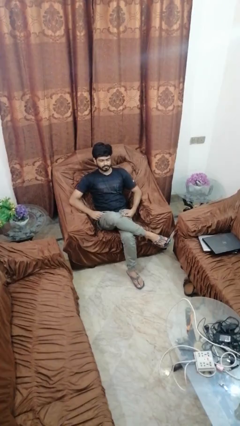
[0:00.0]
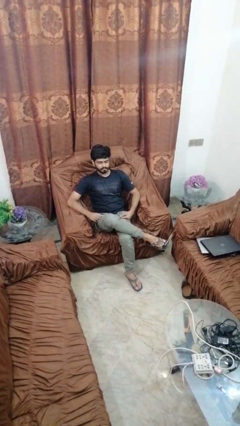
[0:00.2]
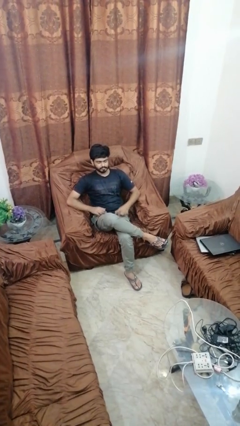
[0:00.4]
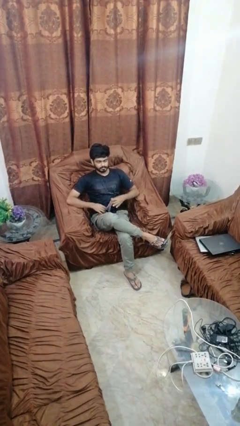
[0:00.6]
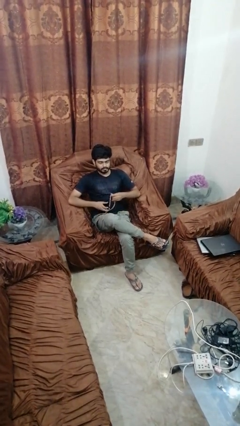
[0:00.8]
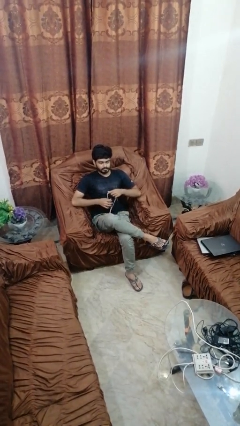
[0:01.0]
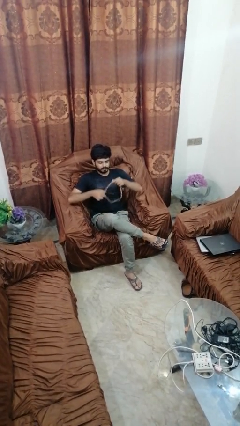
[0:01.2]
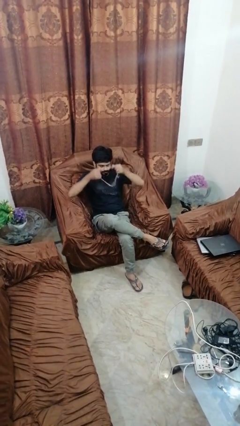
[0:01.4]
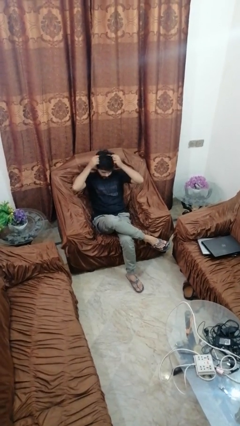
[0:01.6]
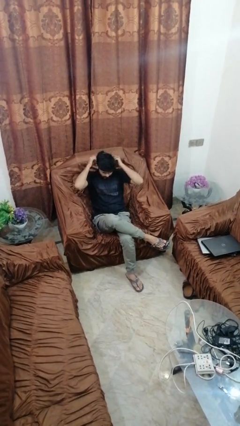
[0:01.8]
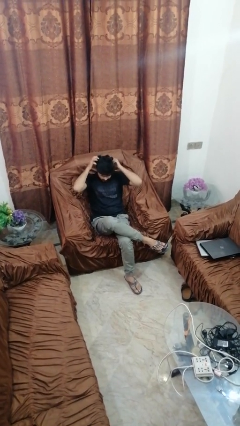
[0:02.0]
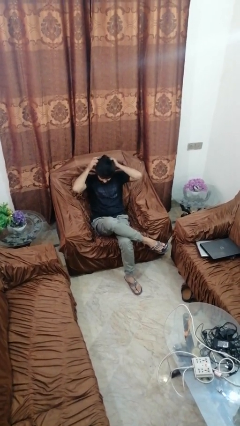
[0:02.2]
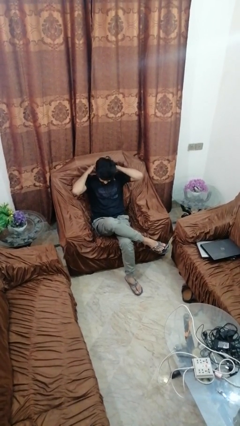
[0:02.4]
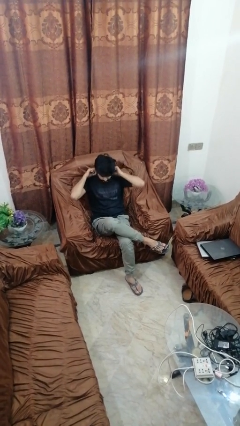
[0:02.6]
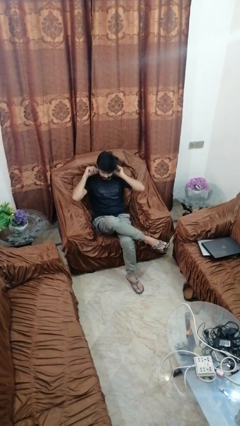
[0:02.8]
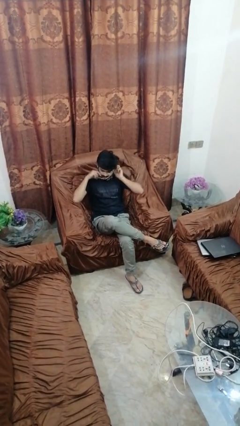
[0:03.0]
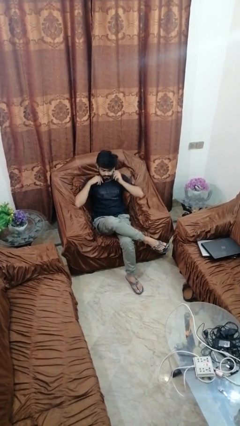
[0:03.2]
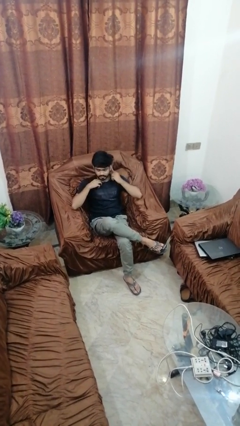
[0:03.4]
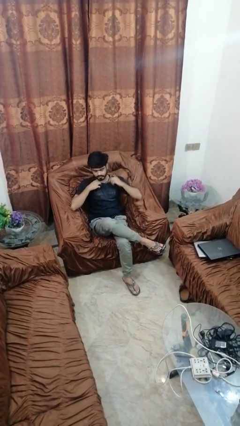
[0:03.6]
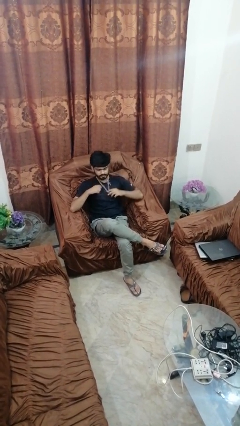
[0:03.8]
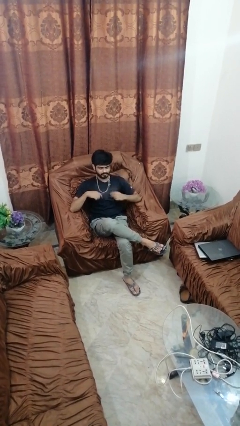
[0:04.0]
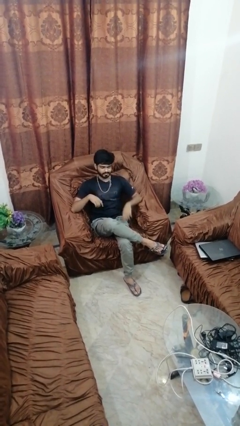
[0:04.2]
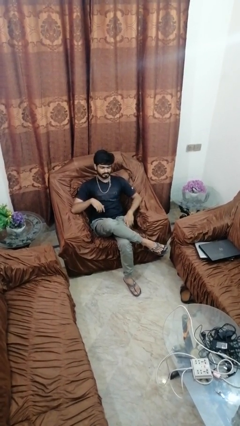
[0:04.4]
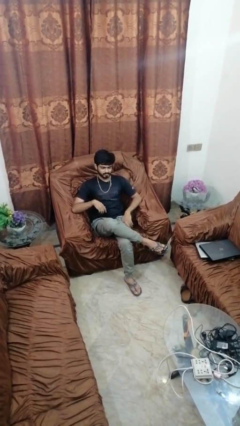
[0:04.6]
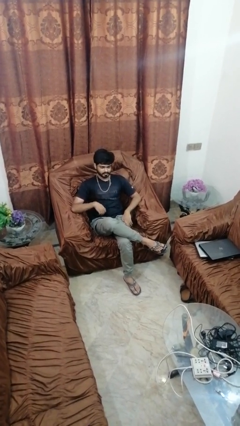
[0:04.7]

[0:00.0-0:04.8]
person puts on necklace

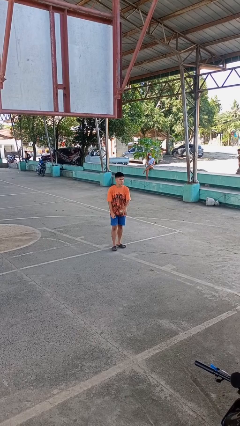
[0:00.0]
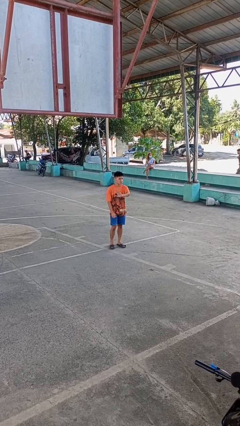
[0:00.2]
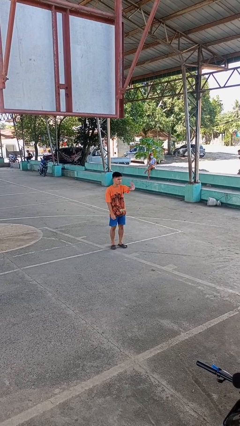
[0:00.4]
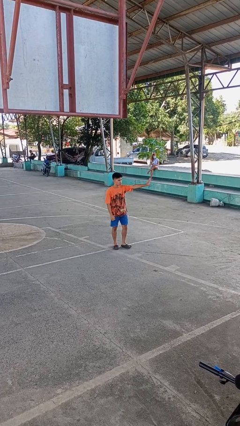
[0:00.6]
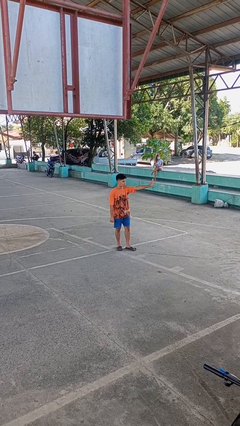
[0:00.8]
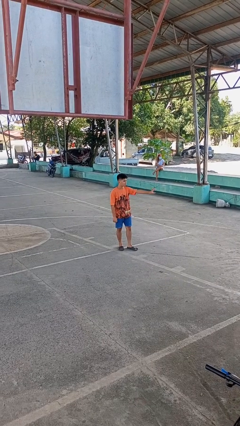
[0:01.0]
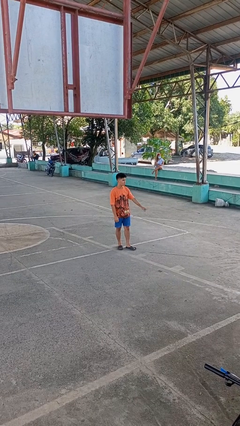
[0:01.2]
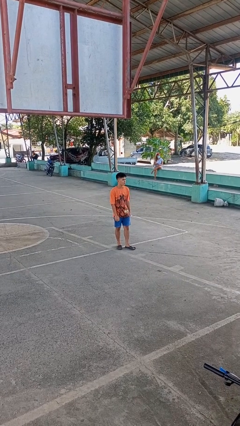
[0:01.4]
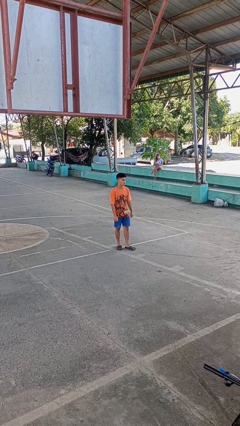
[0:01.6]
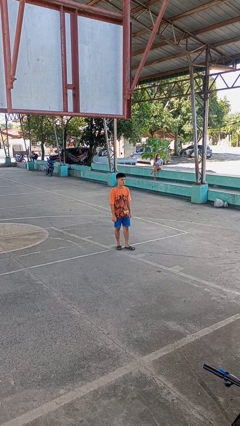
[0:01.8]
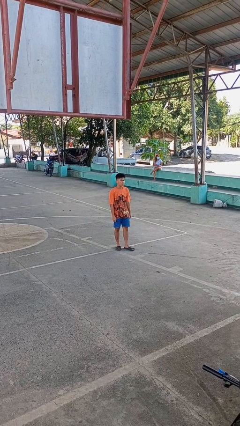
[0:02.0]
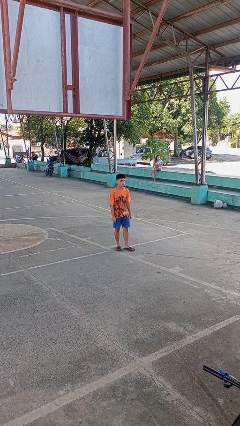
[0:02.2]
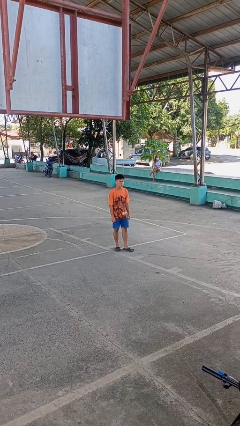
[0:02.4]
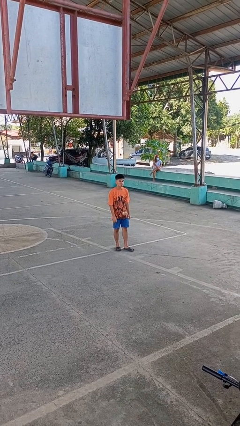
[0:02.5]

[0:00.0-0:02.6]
person gestures swipe left

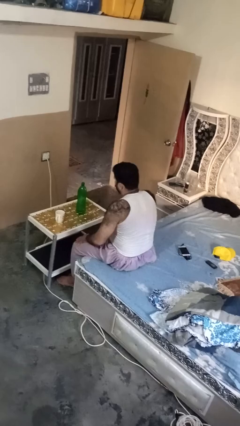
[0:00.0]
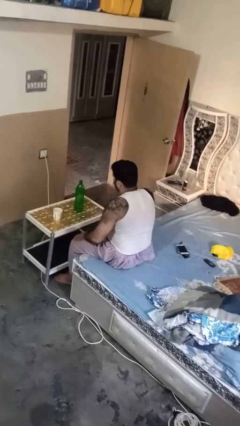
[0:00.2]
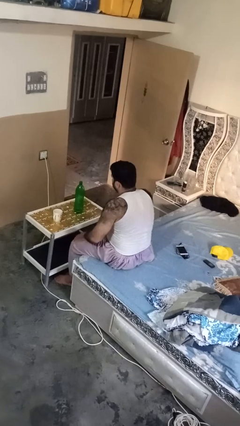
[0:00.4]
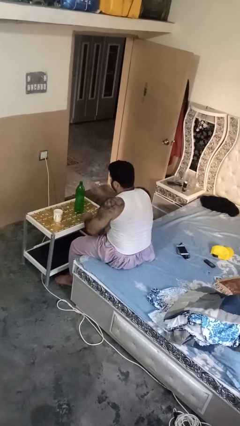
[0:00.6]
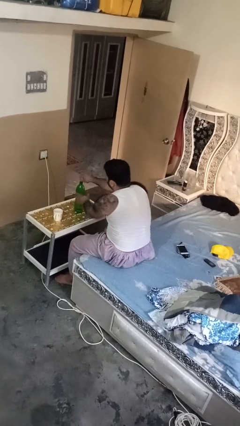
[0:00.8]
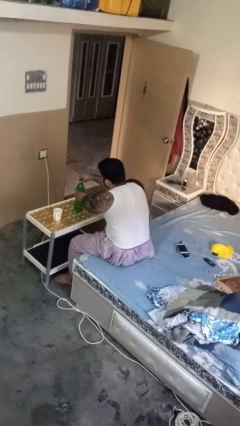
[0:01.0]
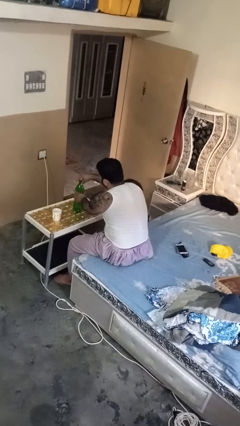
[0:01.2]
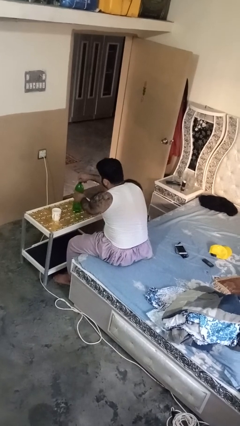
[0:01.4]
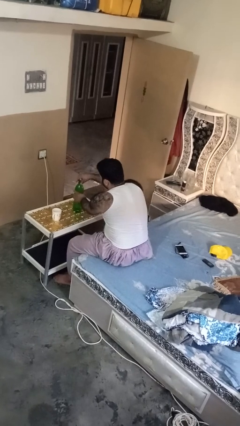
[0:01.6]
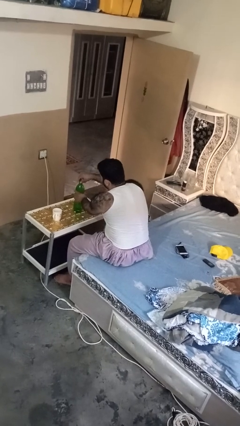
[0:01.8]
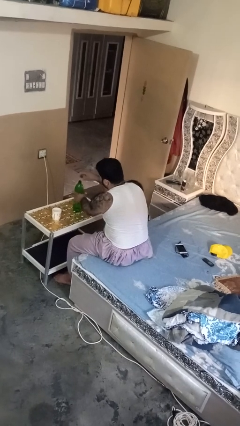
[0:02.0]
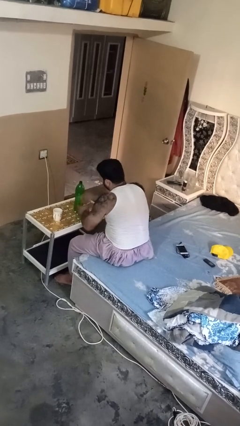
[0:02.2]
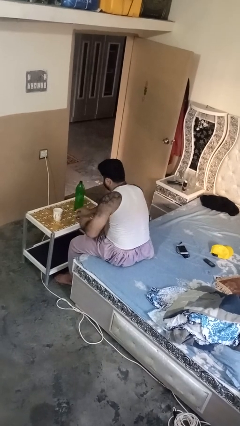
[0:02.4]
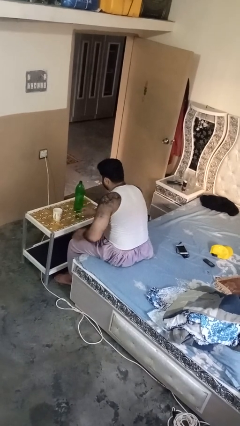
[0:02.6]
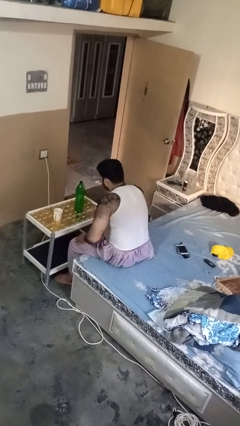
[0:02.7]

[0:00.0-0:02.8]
person unscrews lid from bottle

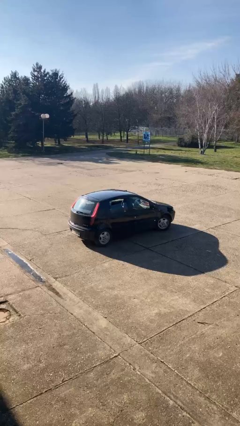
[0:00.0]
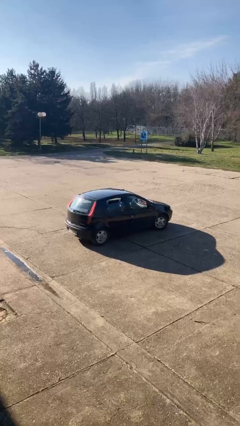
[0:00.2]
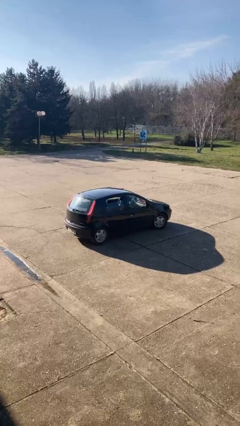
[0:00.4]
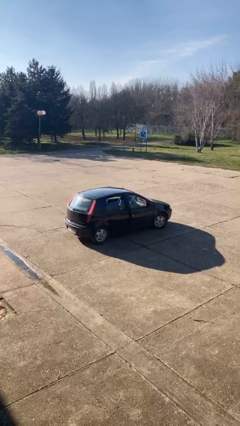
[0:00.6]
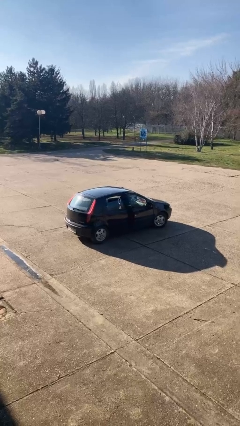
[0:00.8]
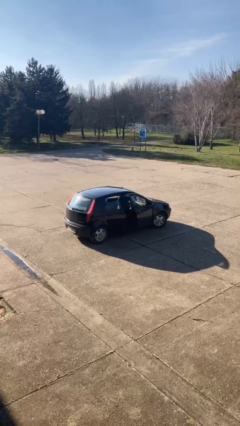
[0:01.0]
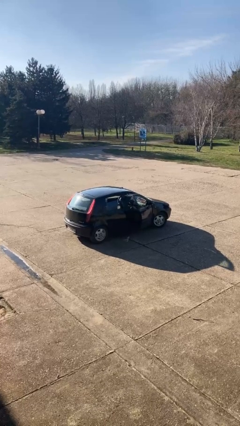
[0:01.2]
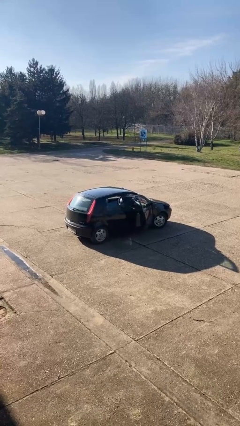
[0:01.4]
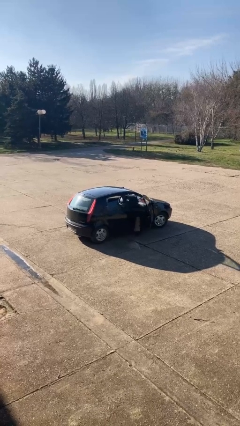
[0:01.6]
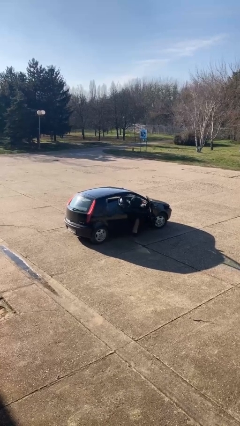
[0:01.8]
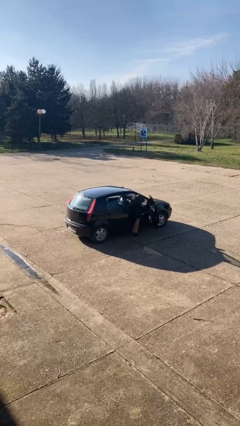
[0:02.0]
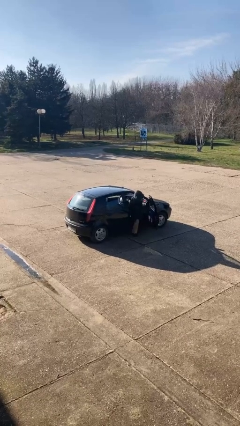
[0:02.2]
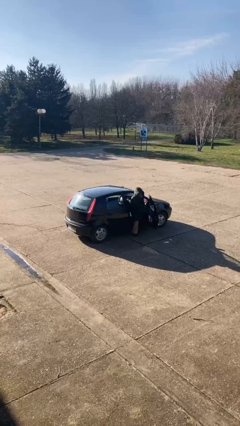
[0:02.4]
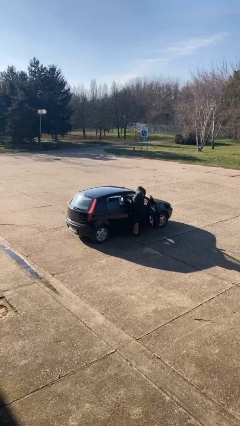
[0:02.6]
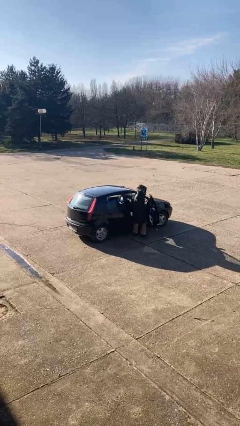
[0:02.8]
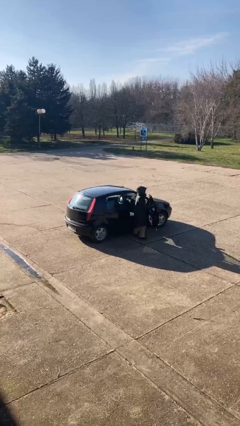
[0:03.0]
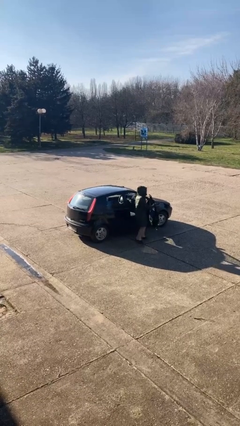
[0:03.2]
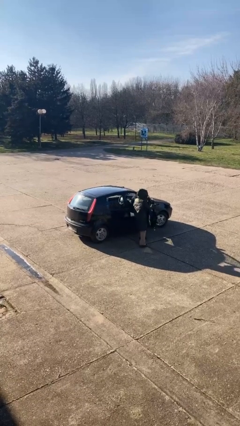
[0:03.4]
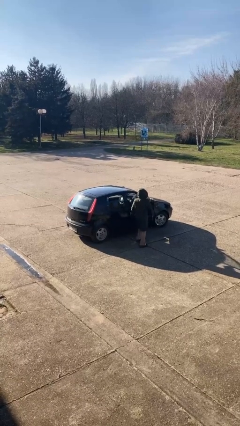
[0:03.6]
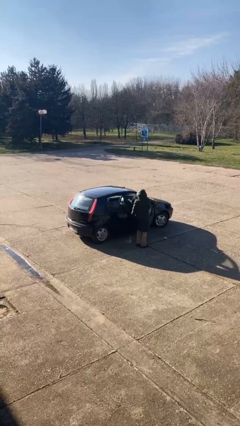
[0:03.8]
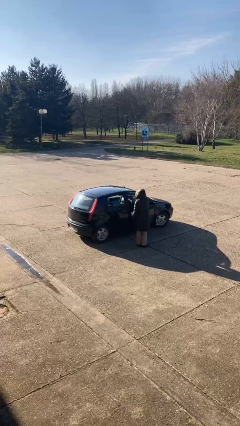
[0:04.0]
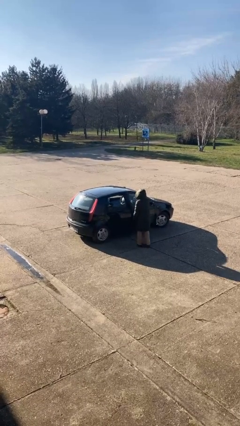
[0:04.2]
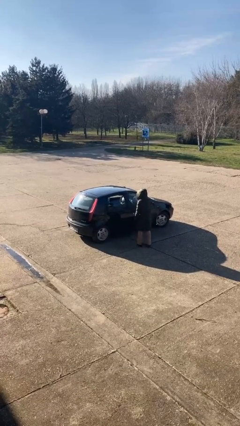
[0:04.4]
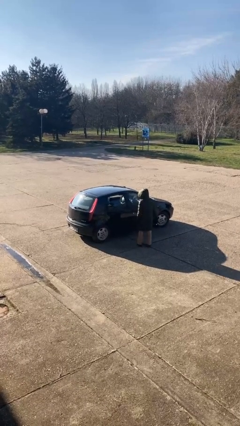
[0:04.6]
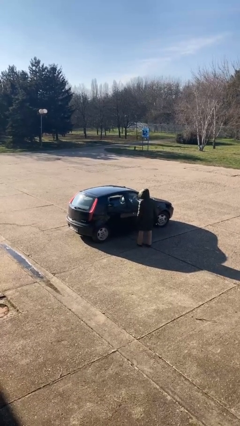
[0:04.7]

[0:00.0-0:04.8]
car drops off person

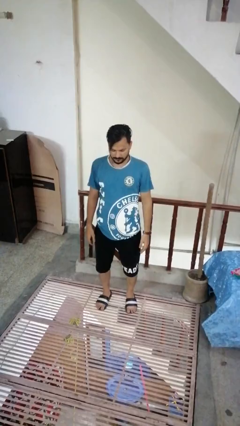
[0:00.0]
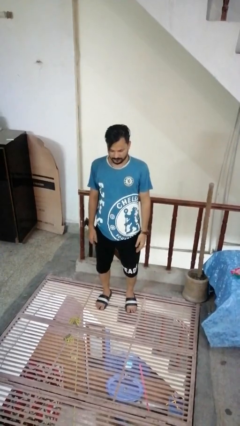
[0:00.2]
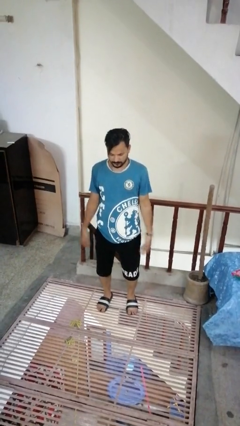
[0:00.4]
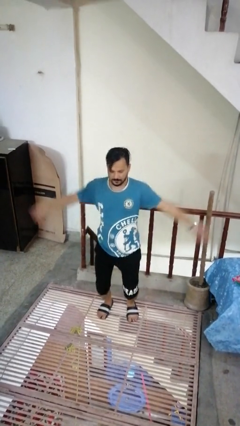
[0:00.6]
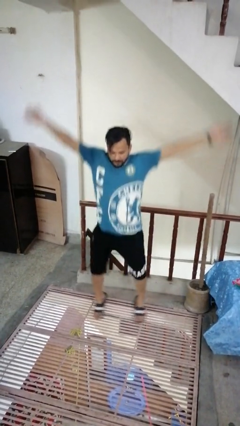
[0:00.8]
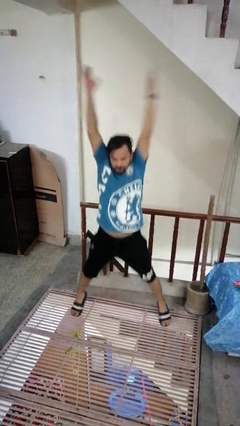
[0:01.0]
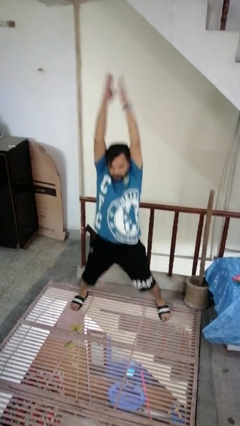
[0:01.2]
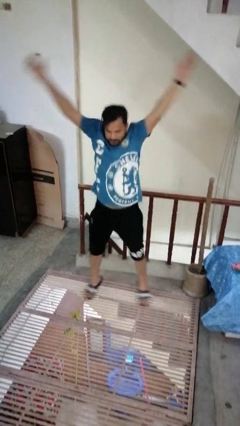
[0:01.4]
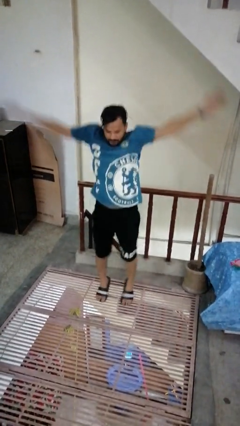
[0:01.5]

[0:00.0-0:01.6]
person exercises with jumping jacks

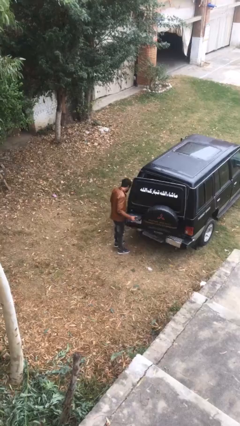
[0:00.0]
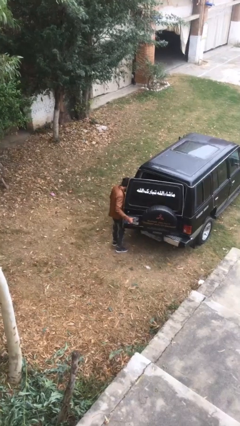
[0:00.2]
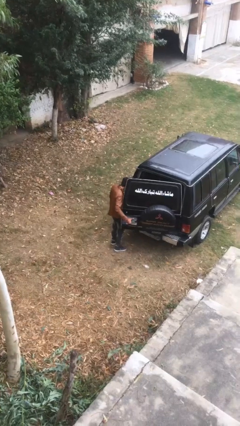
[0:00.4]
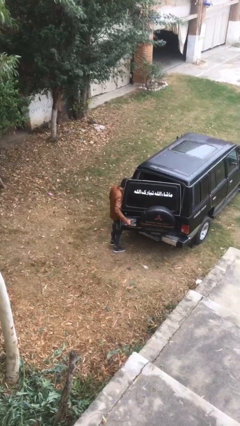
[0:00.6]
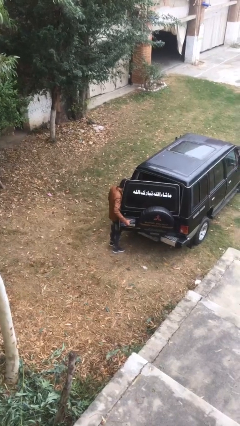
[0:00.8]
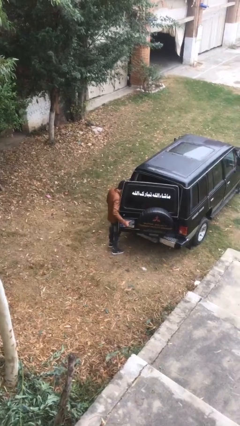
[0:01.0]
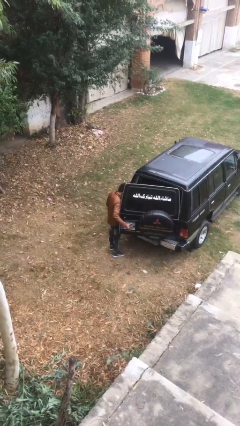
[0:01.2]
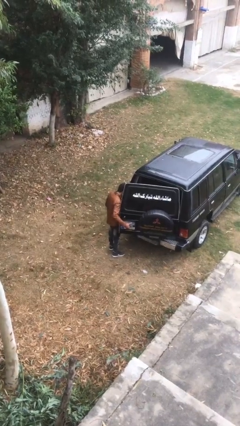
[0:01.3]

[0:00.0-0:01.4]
person opens car trunk
